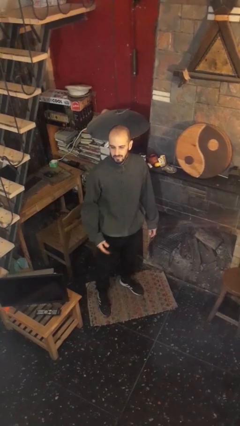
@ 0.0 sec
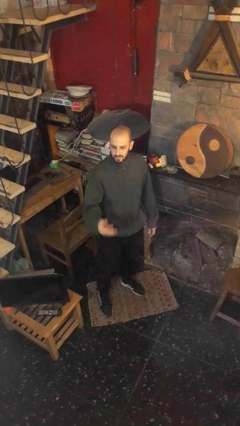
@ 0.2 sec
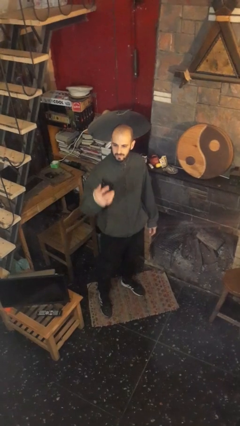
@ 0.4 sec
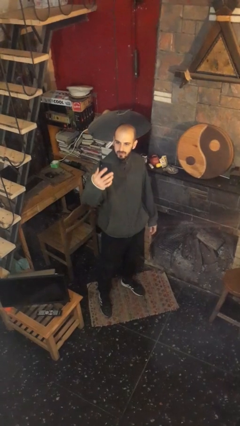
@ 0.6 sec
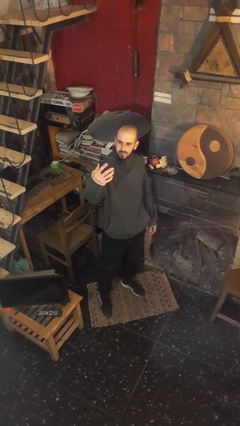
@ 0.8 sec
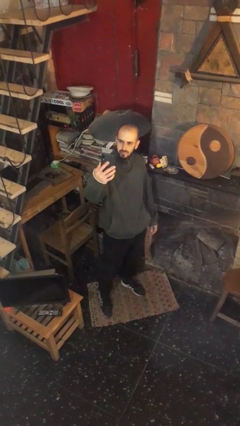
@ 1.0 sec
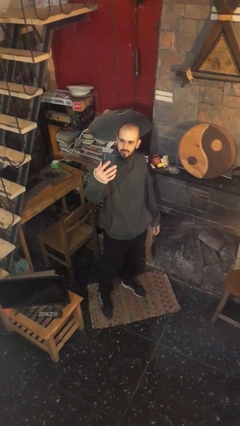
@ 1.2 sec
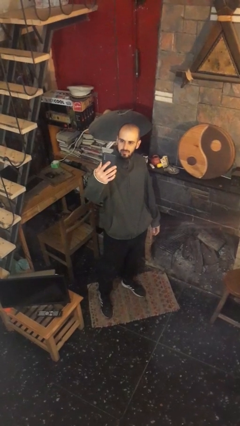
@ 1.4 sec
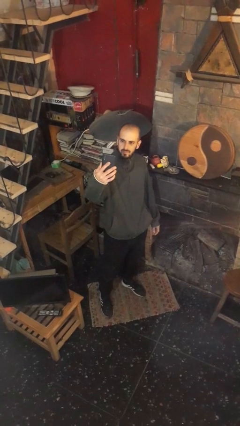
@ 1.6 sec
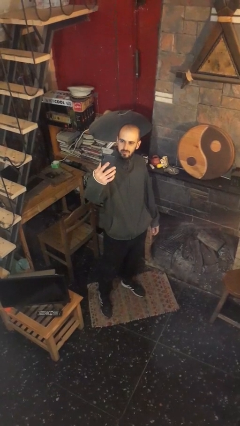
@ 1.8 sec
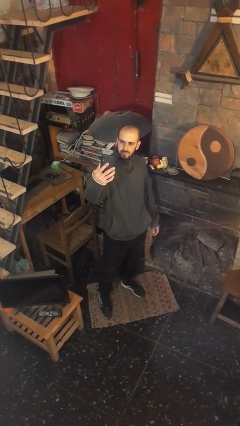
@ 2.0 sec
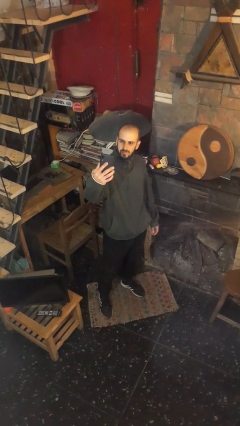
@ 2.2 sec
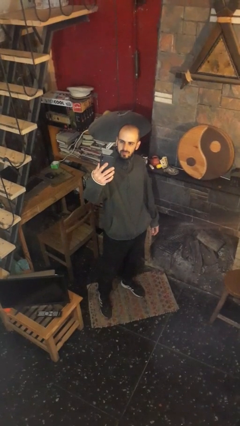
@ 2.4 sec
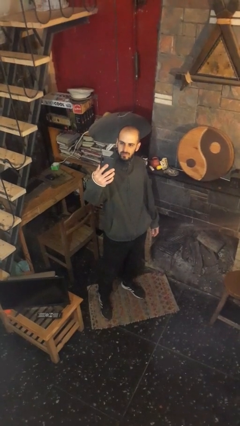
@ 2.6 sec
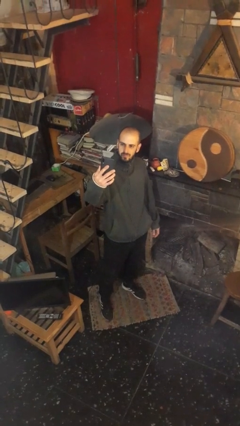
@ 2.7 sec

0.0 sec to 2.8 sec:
person takes selfie

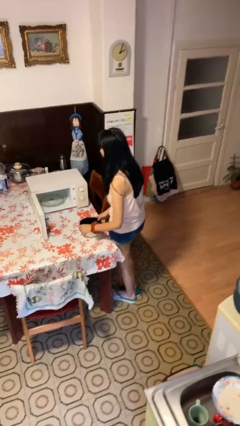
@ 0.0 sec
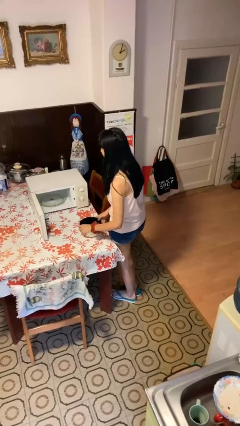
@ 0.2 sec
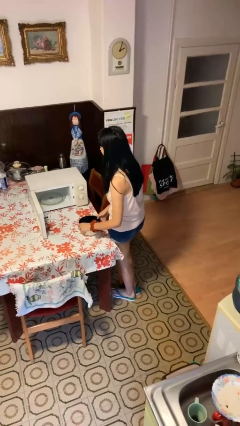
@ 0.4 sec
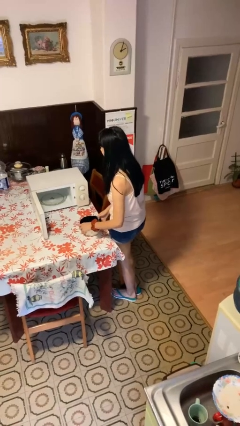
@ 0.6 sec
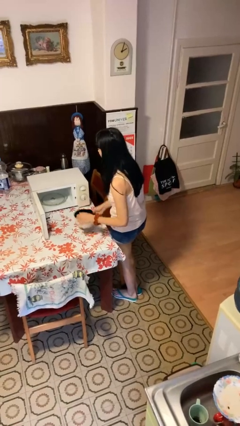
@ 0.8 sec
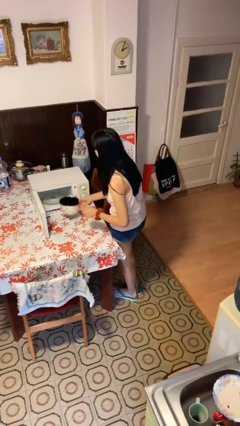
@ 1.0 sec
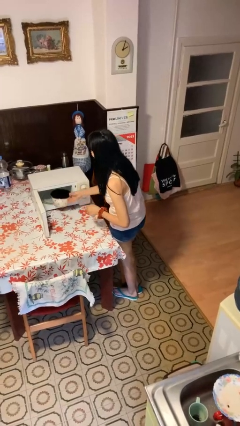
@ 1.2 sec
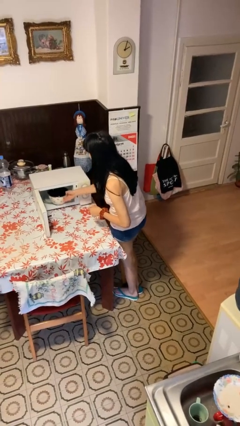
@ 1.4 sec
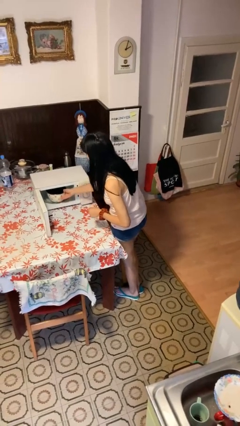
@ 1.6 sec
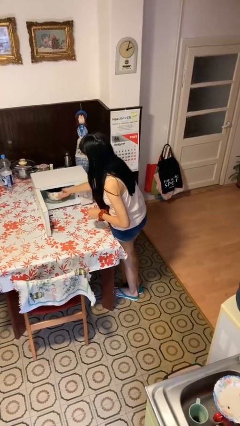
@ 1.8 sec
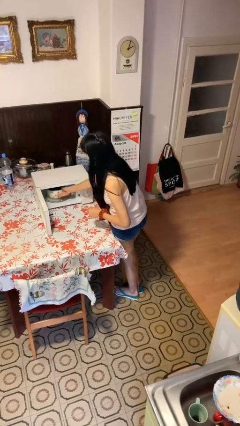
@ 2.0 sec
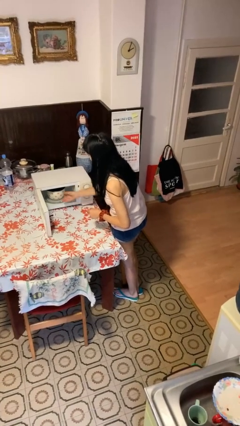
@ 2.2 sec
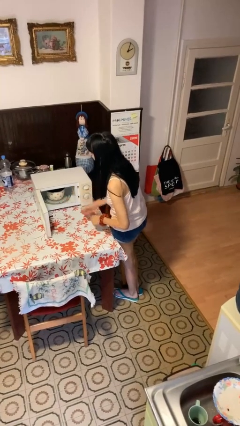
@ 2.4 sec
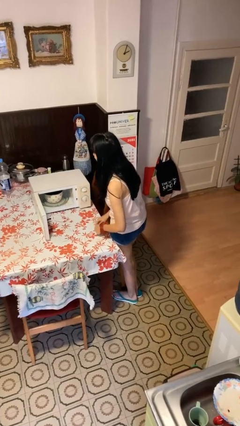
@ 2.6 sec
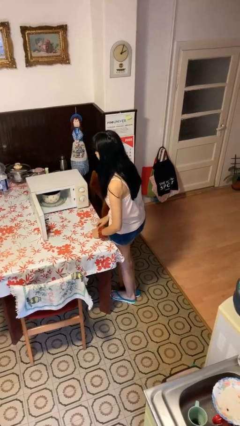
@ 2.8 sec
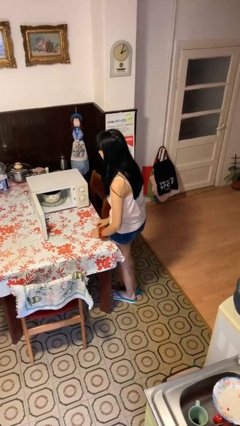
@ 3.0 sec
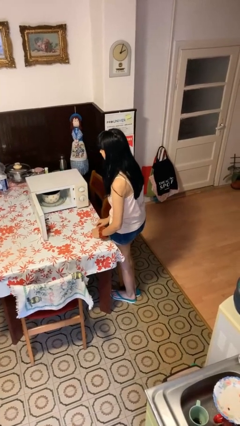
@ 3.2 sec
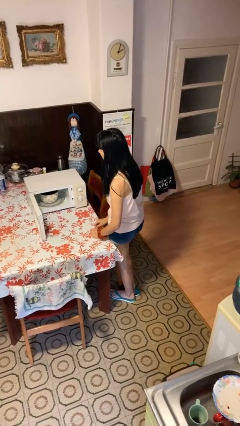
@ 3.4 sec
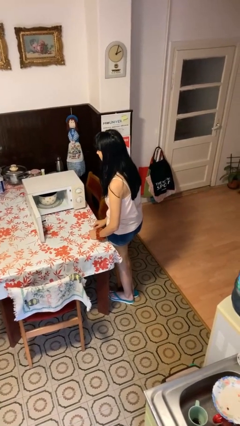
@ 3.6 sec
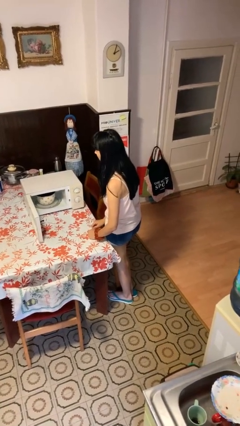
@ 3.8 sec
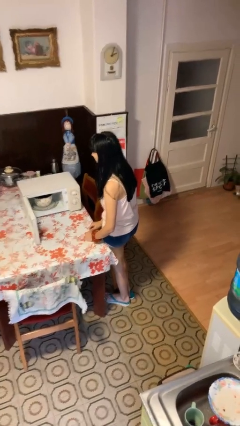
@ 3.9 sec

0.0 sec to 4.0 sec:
person puts object into microwave

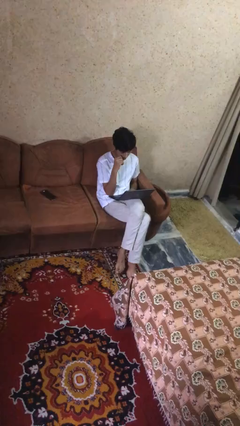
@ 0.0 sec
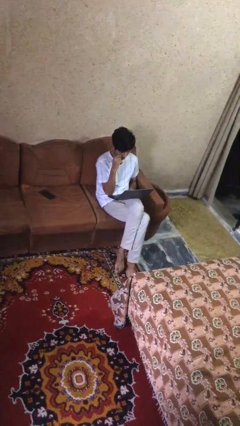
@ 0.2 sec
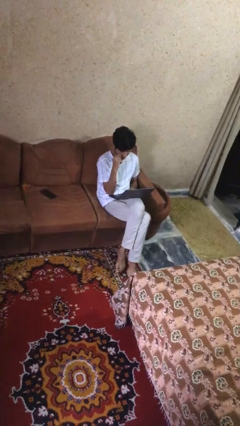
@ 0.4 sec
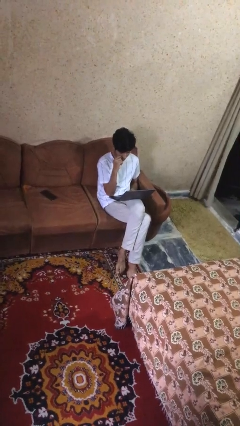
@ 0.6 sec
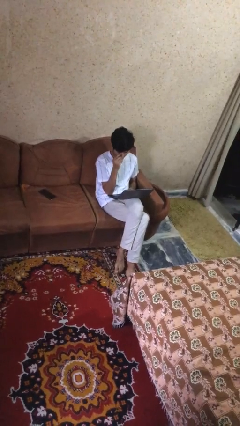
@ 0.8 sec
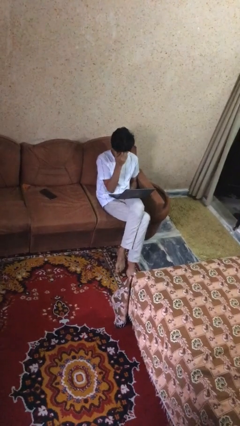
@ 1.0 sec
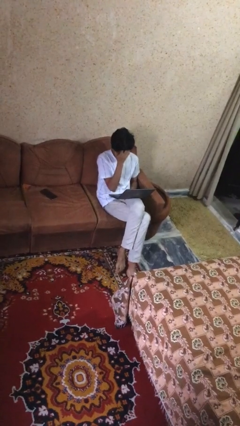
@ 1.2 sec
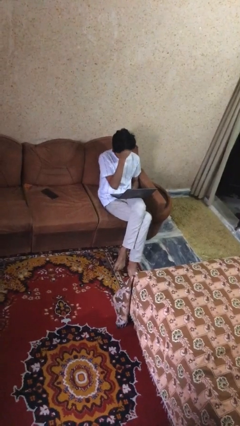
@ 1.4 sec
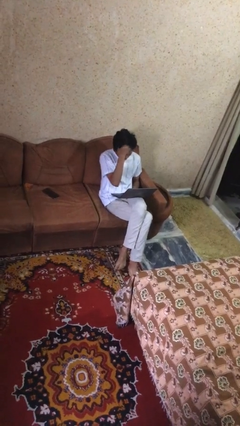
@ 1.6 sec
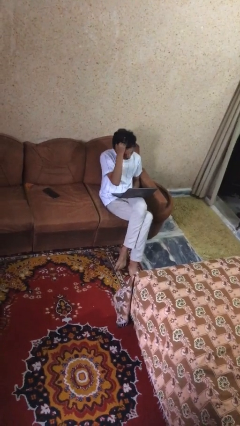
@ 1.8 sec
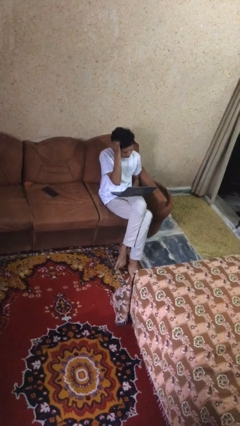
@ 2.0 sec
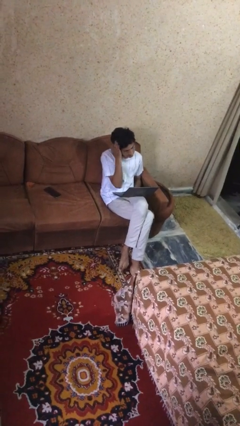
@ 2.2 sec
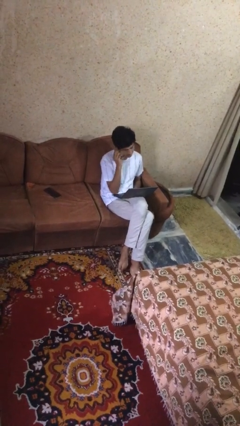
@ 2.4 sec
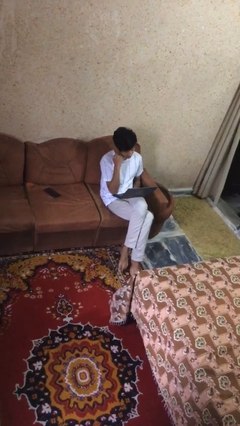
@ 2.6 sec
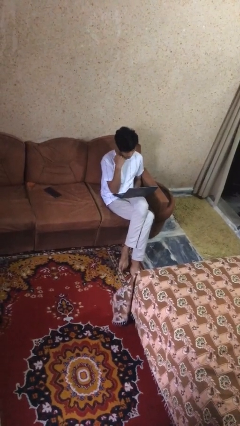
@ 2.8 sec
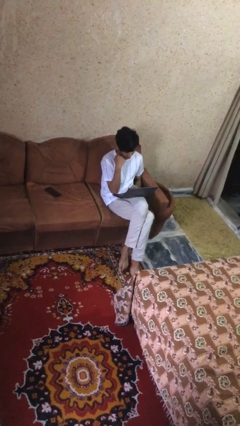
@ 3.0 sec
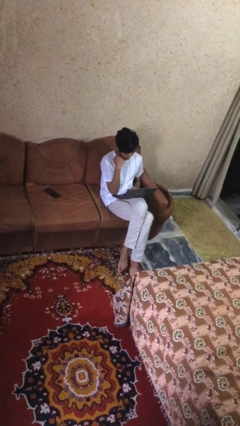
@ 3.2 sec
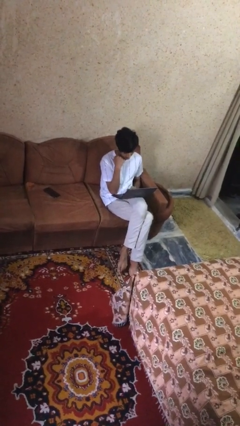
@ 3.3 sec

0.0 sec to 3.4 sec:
person interacts with laptop

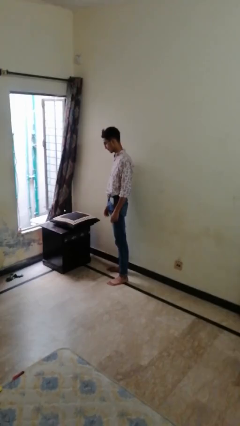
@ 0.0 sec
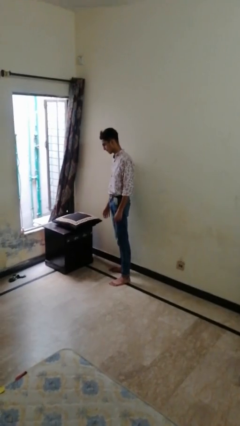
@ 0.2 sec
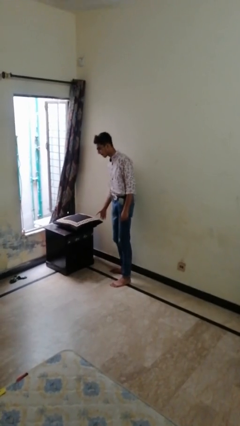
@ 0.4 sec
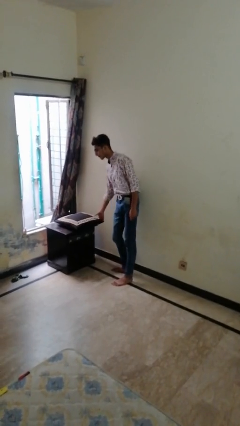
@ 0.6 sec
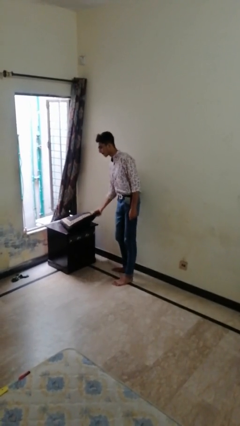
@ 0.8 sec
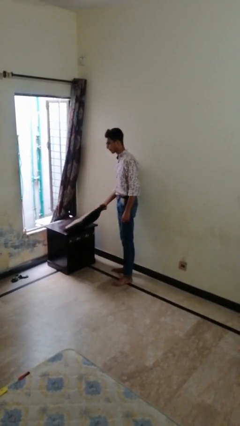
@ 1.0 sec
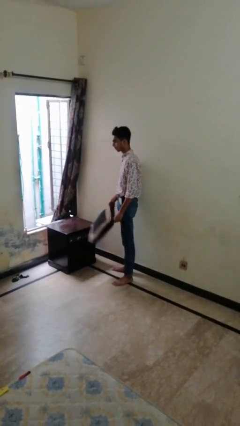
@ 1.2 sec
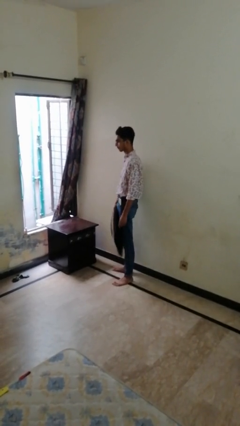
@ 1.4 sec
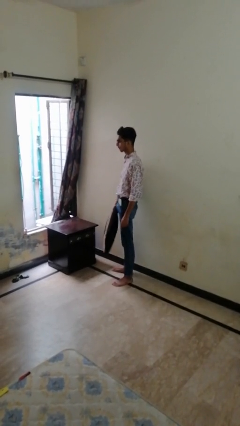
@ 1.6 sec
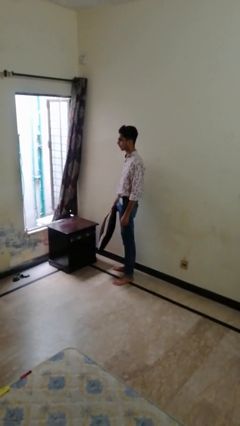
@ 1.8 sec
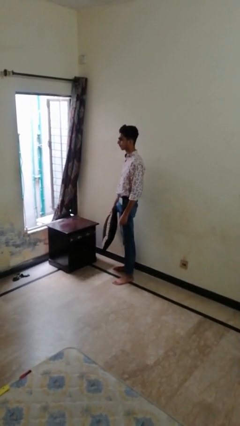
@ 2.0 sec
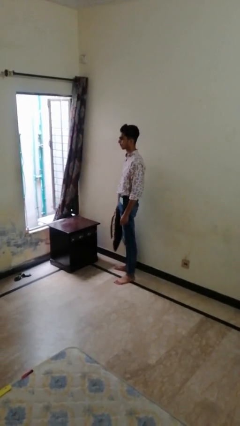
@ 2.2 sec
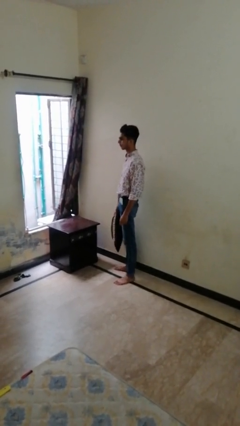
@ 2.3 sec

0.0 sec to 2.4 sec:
person picks up object from table

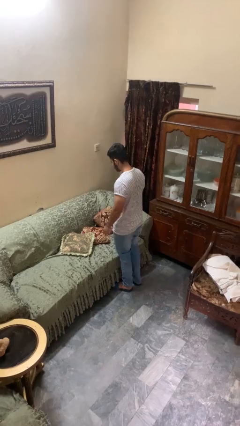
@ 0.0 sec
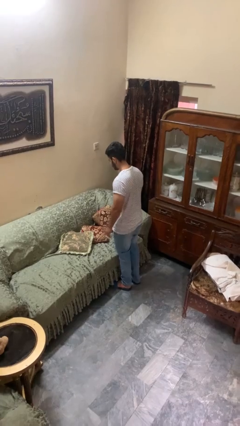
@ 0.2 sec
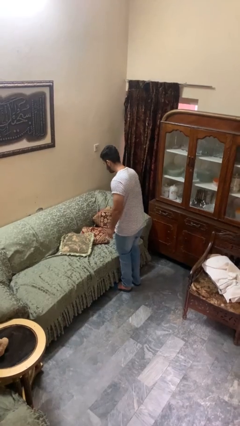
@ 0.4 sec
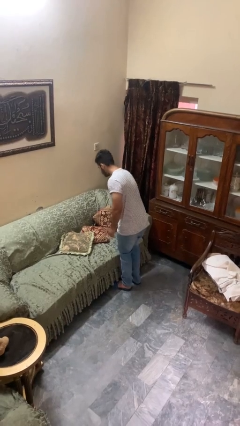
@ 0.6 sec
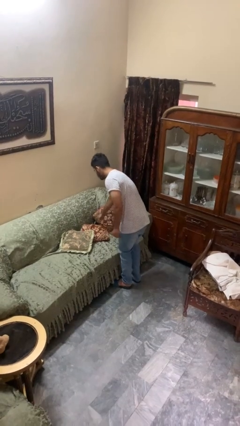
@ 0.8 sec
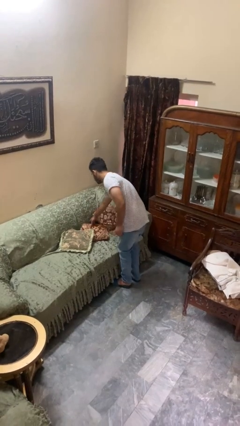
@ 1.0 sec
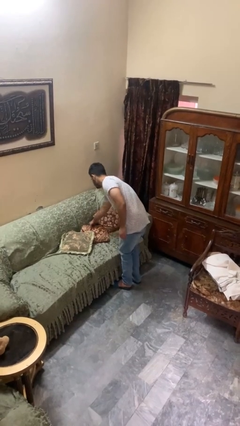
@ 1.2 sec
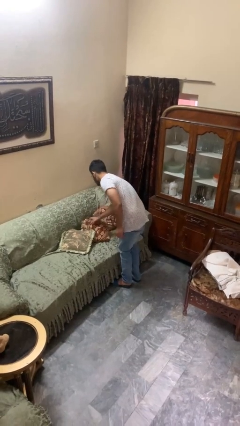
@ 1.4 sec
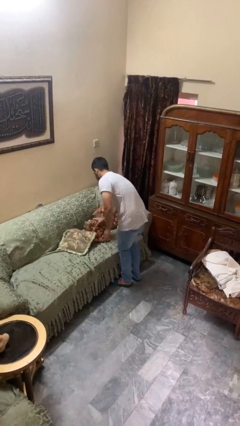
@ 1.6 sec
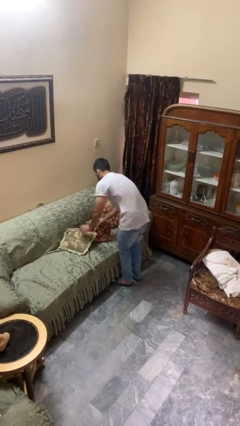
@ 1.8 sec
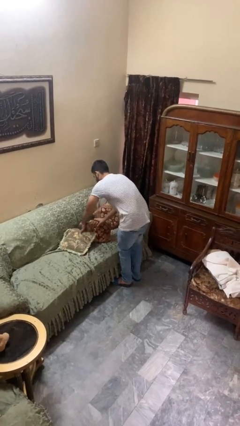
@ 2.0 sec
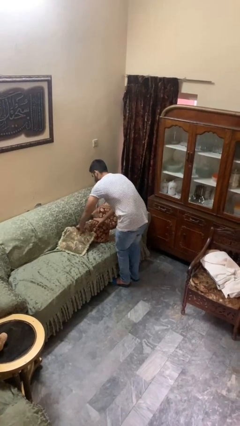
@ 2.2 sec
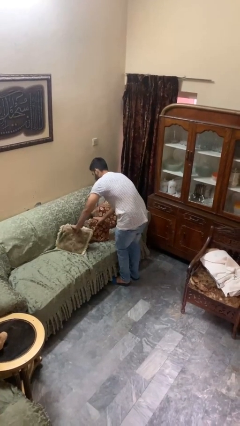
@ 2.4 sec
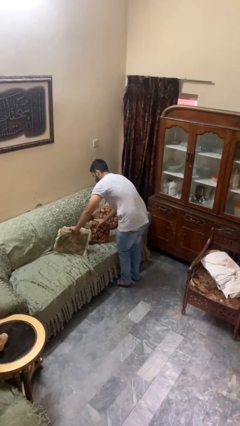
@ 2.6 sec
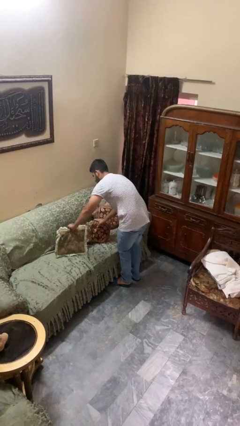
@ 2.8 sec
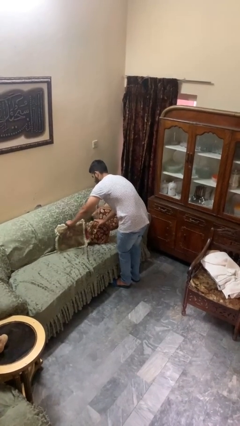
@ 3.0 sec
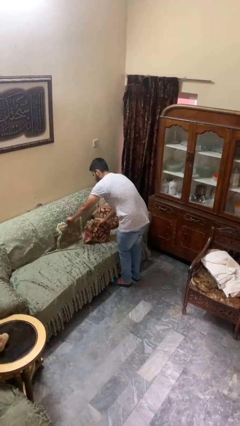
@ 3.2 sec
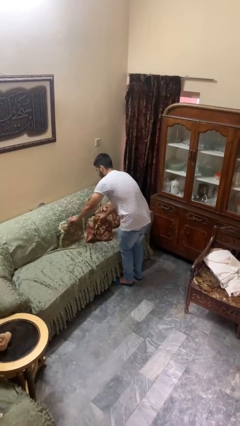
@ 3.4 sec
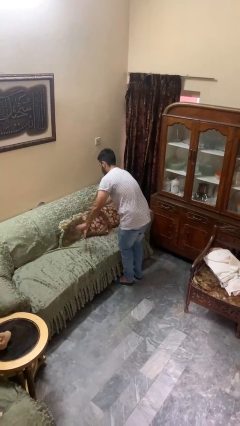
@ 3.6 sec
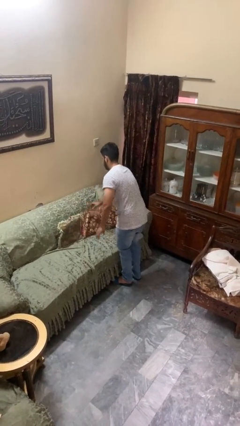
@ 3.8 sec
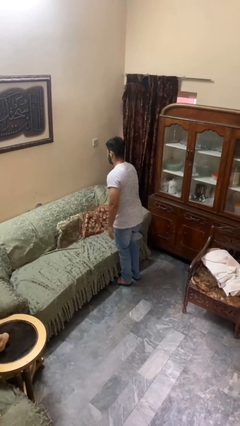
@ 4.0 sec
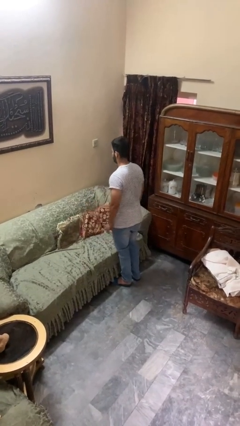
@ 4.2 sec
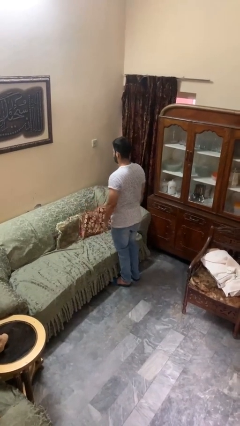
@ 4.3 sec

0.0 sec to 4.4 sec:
person searches in couch

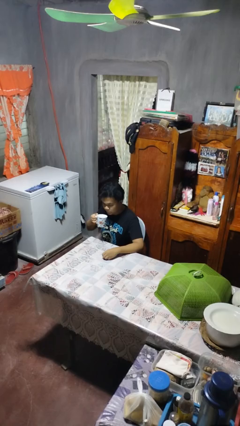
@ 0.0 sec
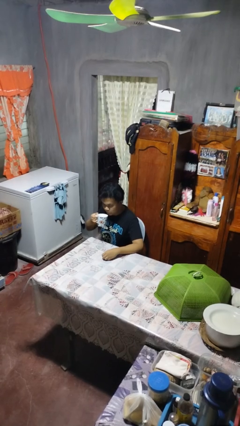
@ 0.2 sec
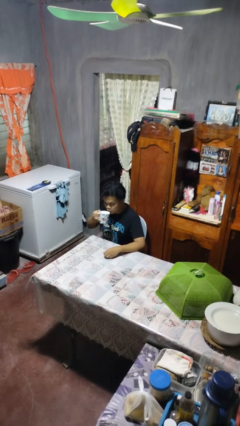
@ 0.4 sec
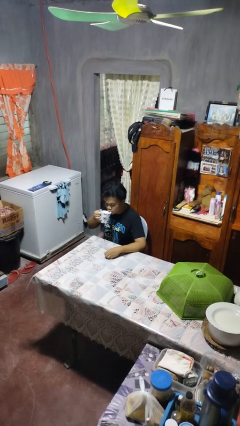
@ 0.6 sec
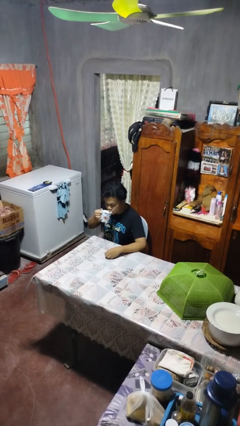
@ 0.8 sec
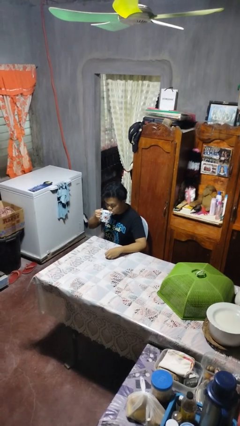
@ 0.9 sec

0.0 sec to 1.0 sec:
person drinks from mug
